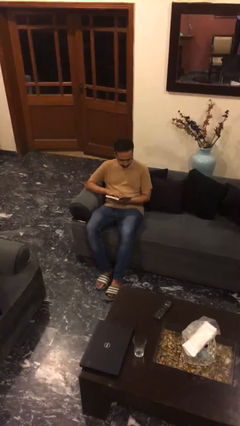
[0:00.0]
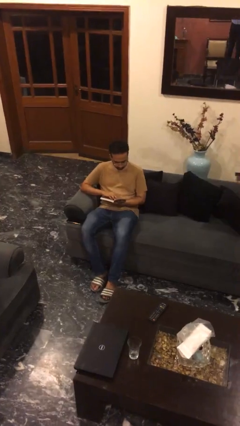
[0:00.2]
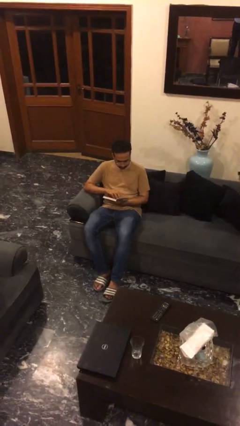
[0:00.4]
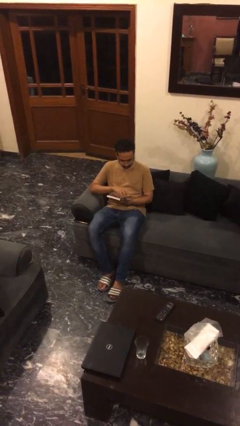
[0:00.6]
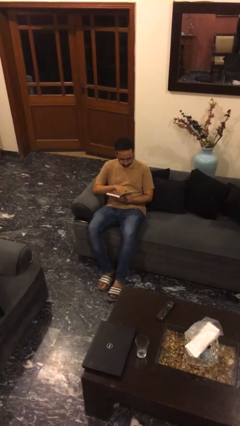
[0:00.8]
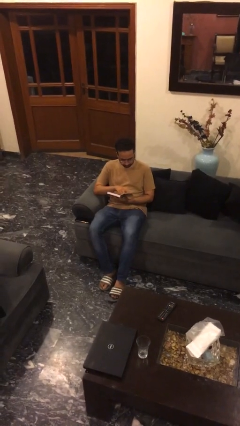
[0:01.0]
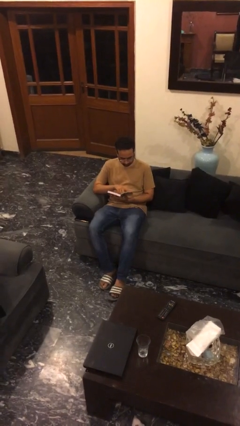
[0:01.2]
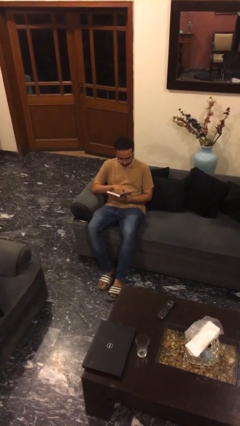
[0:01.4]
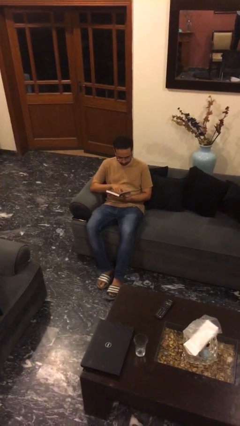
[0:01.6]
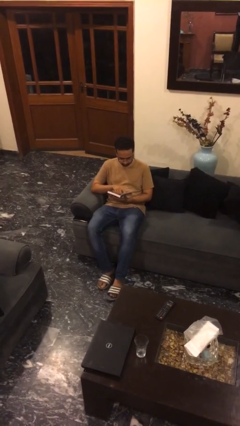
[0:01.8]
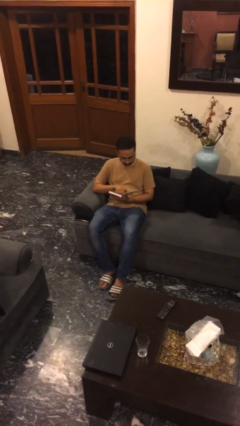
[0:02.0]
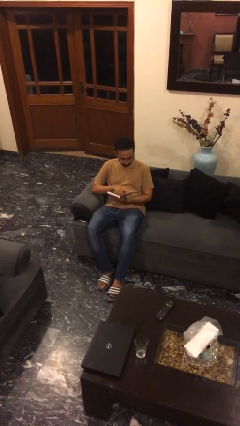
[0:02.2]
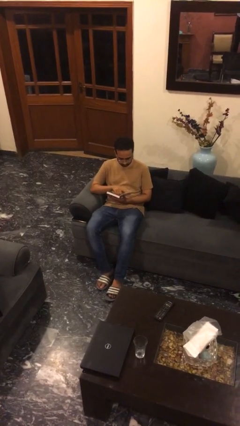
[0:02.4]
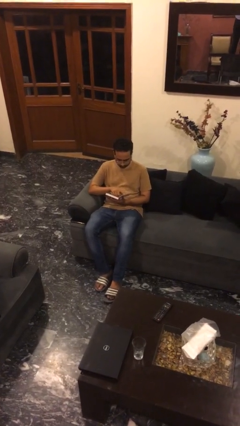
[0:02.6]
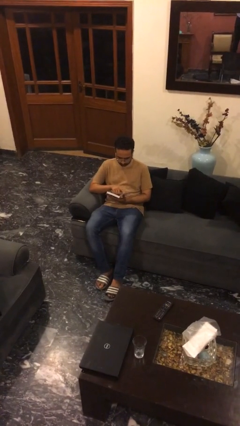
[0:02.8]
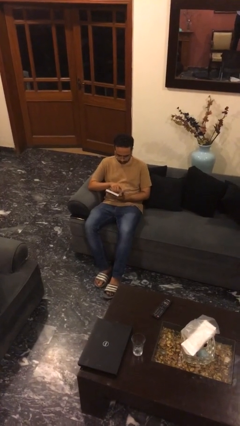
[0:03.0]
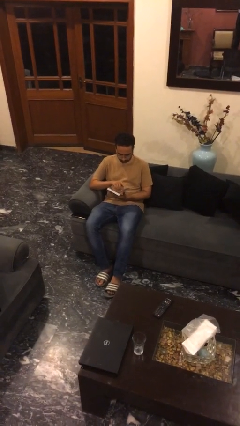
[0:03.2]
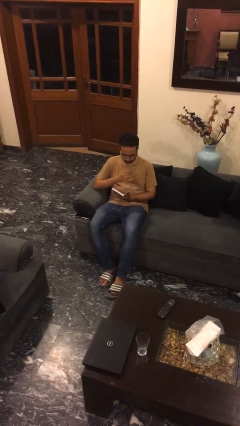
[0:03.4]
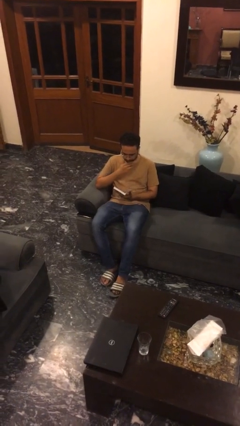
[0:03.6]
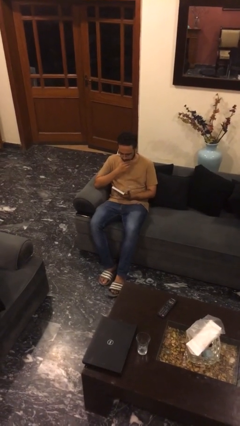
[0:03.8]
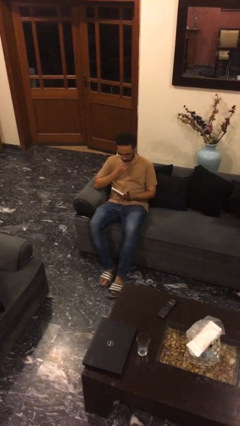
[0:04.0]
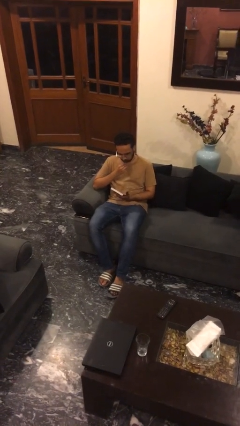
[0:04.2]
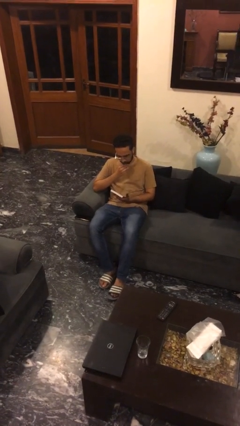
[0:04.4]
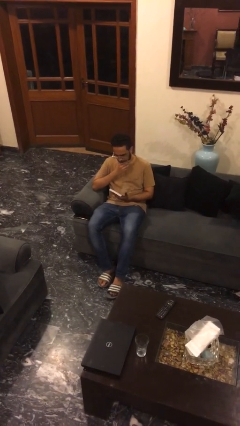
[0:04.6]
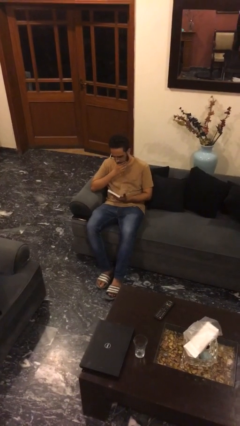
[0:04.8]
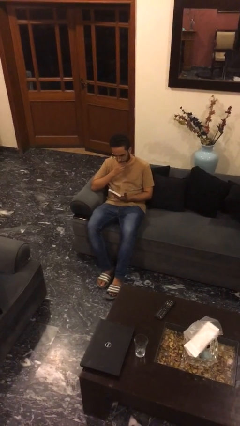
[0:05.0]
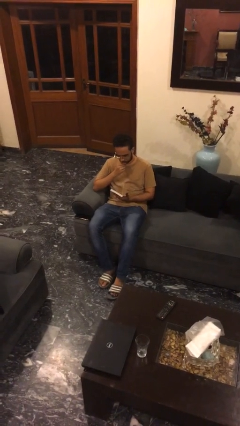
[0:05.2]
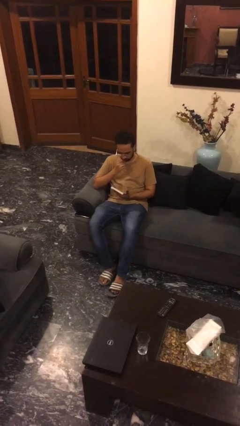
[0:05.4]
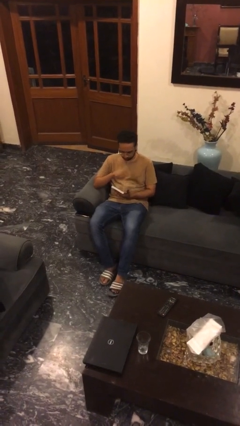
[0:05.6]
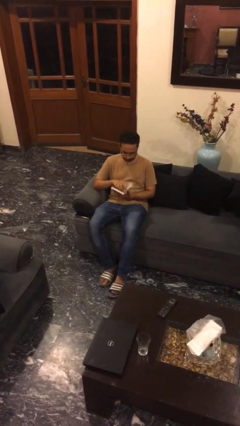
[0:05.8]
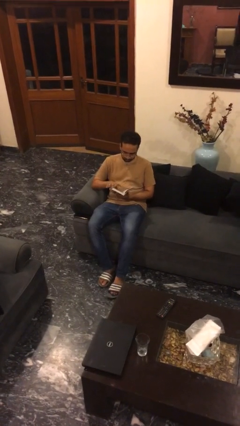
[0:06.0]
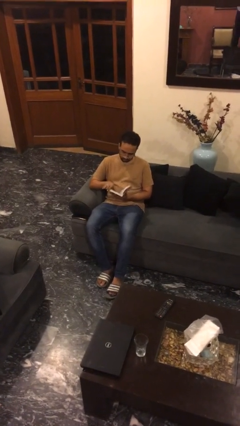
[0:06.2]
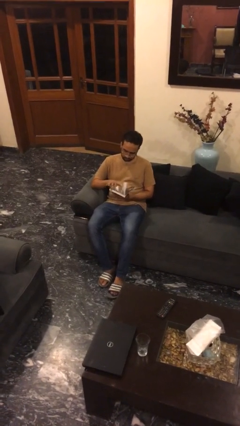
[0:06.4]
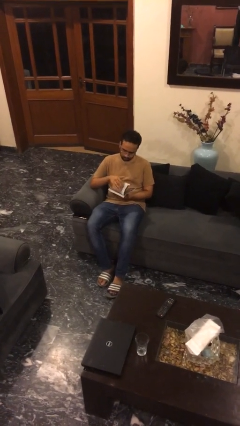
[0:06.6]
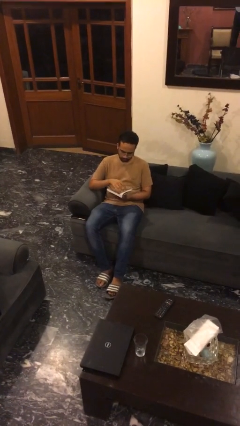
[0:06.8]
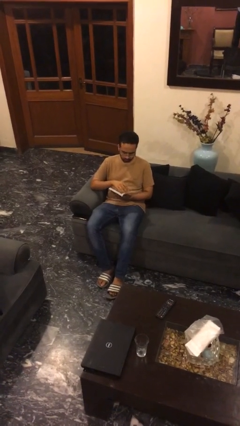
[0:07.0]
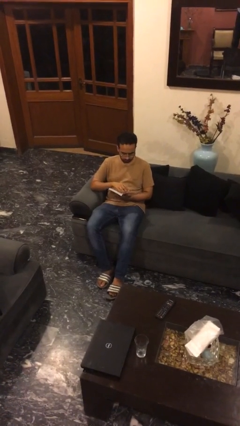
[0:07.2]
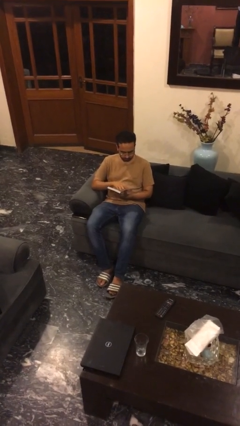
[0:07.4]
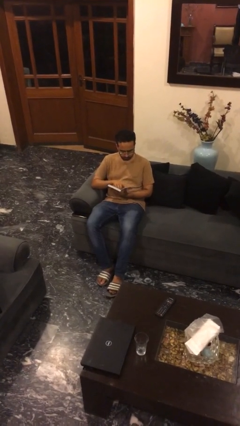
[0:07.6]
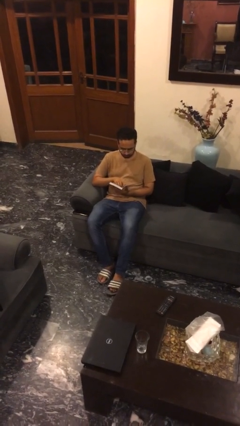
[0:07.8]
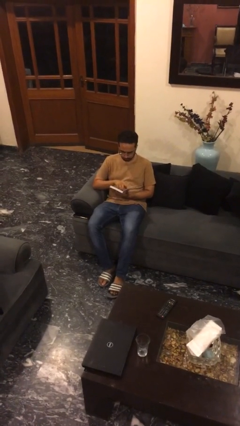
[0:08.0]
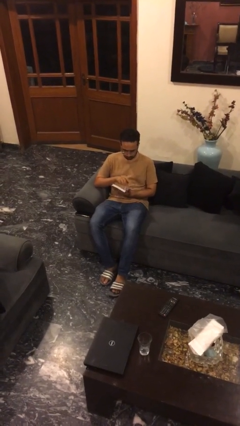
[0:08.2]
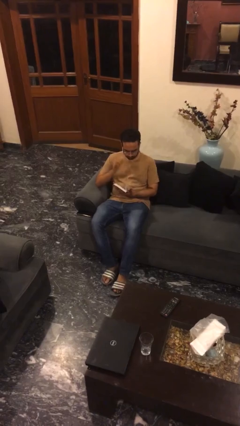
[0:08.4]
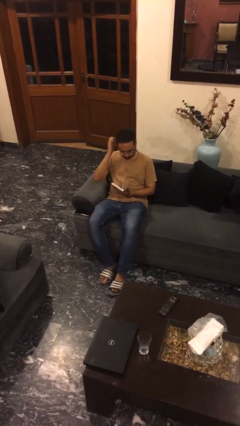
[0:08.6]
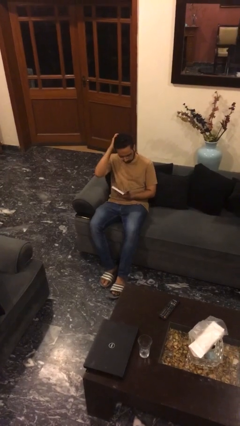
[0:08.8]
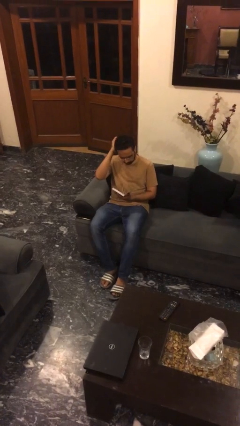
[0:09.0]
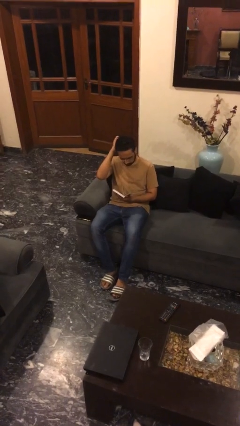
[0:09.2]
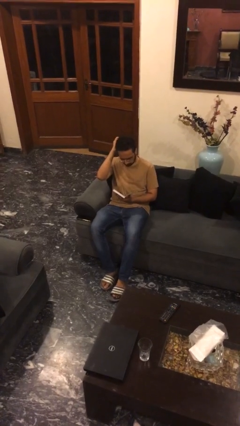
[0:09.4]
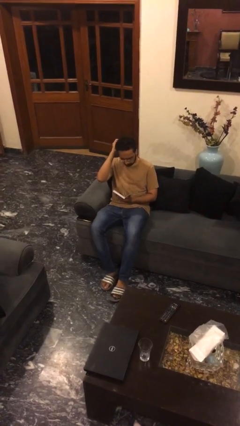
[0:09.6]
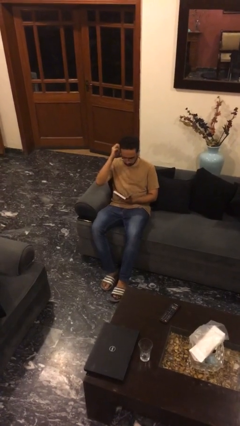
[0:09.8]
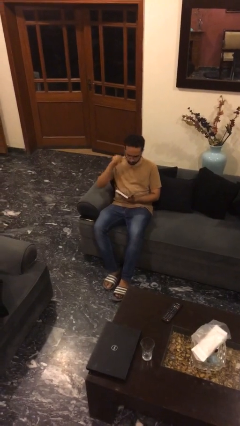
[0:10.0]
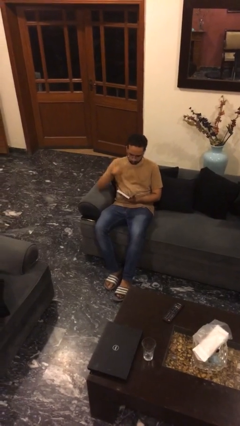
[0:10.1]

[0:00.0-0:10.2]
person reads document

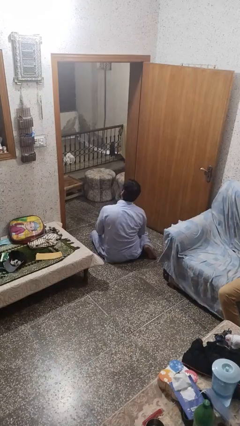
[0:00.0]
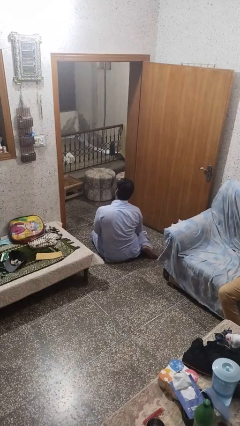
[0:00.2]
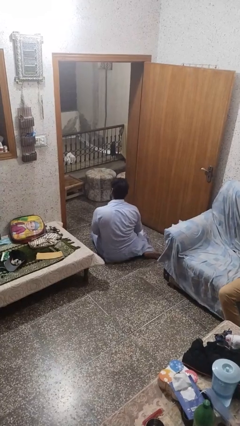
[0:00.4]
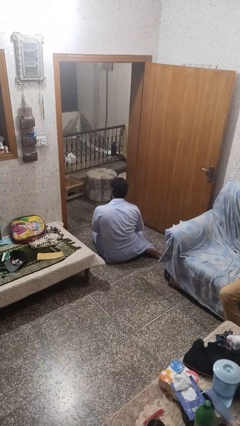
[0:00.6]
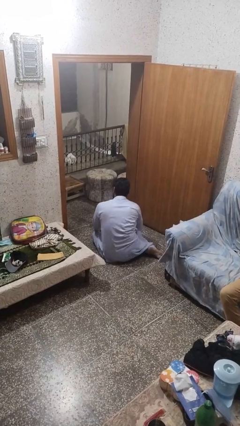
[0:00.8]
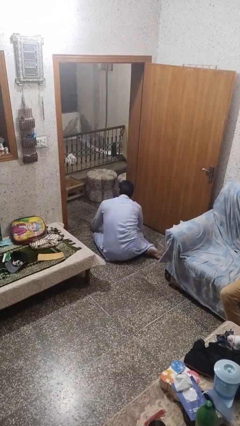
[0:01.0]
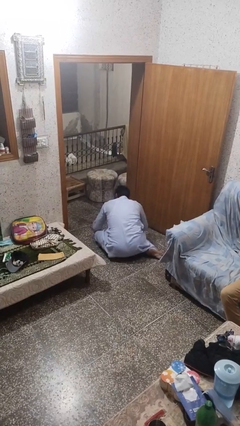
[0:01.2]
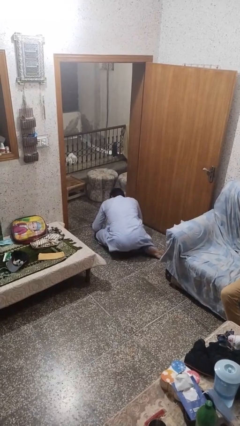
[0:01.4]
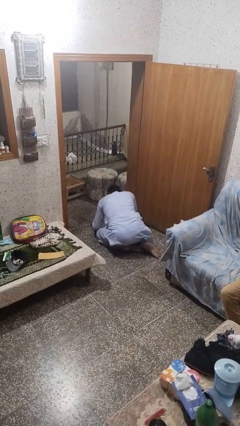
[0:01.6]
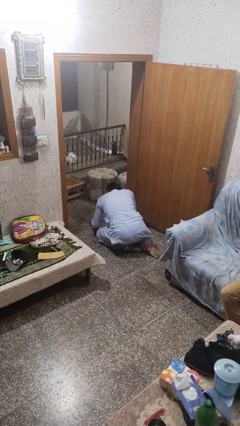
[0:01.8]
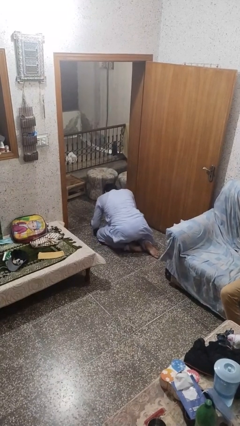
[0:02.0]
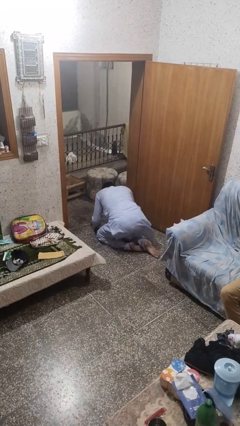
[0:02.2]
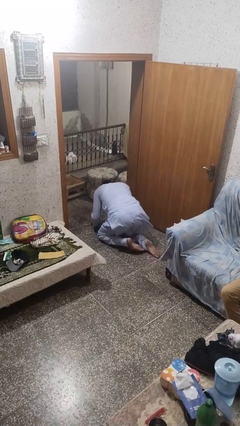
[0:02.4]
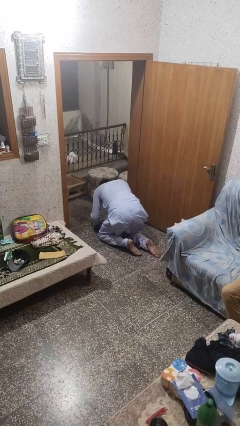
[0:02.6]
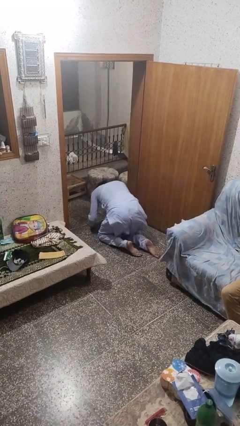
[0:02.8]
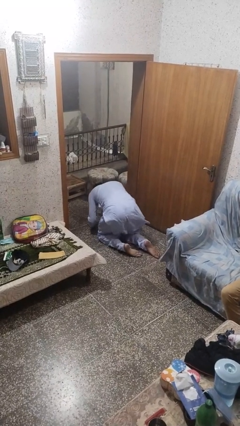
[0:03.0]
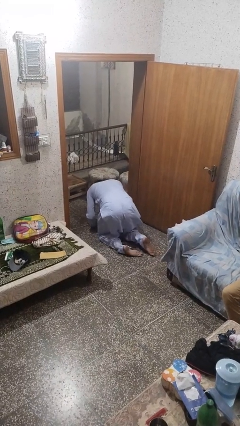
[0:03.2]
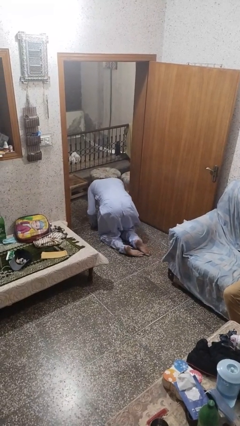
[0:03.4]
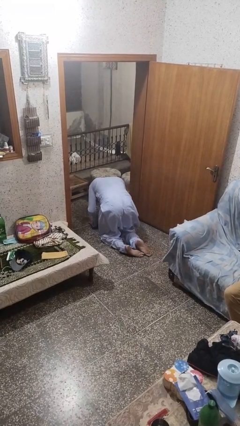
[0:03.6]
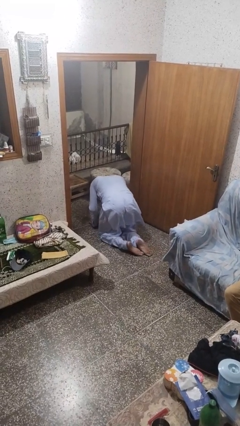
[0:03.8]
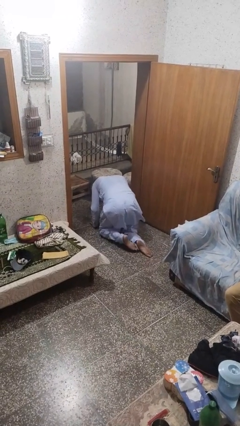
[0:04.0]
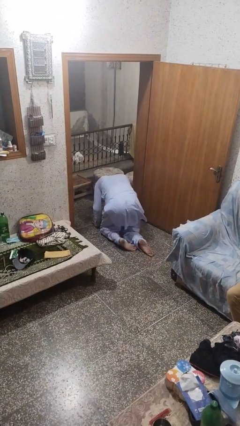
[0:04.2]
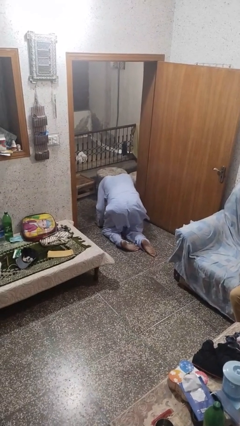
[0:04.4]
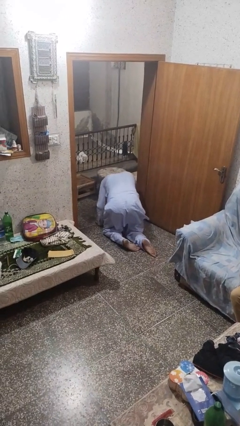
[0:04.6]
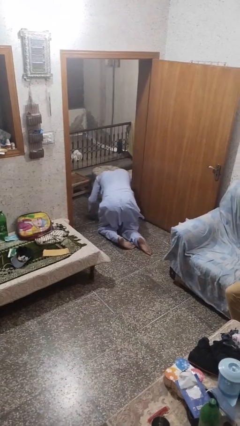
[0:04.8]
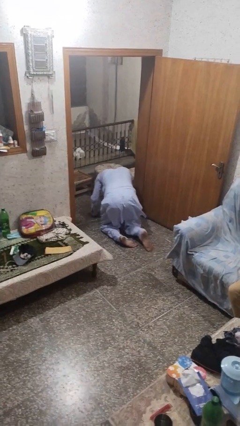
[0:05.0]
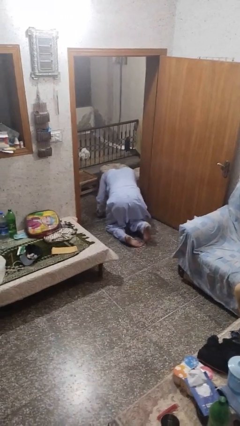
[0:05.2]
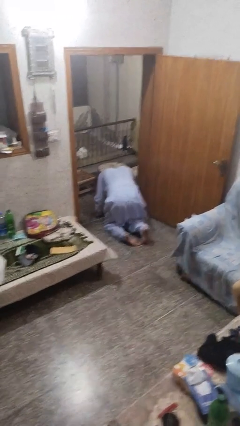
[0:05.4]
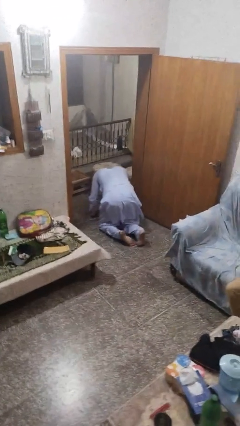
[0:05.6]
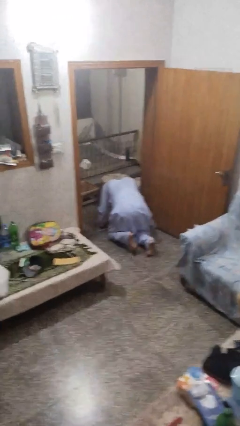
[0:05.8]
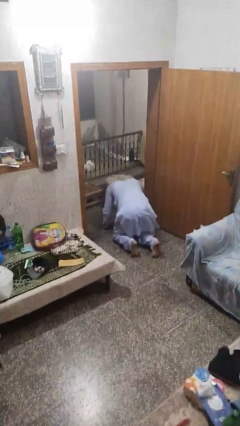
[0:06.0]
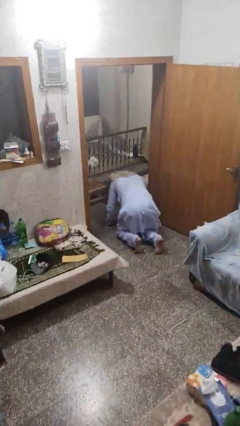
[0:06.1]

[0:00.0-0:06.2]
person crawls

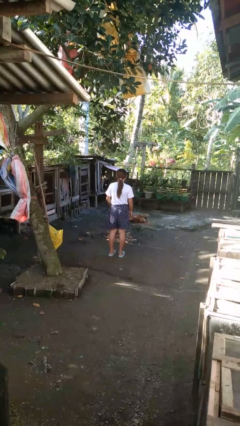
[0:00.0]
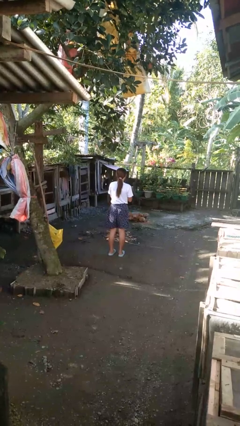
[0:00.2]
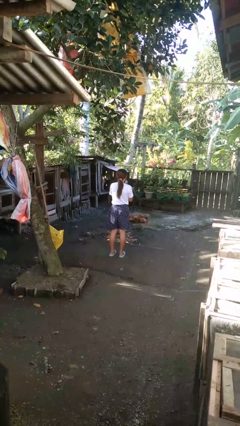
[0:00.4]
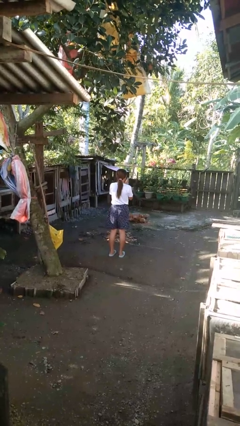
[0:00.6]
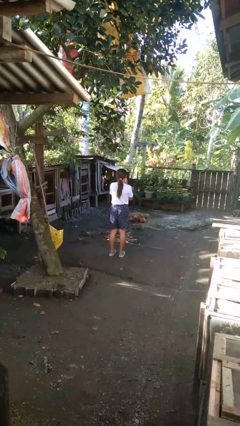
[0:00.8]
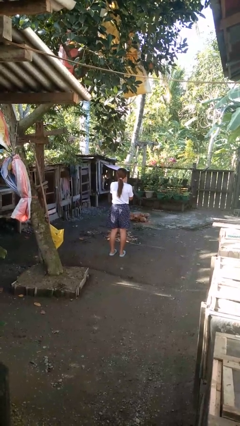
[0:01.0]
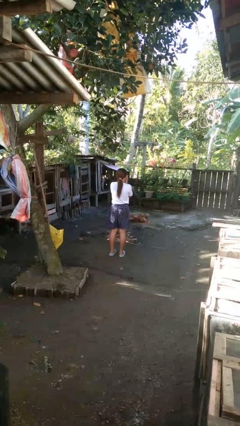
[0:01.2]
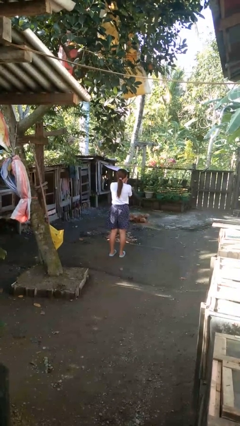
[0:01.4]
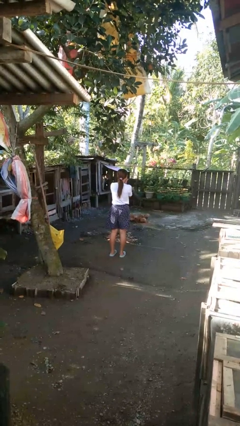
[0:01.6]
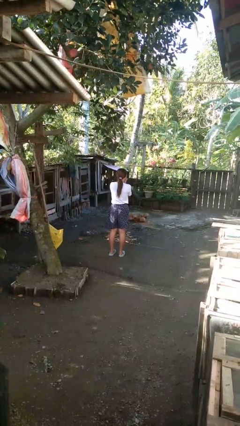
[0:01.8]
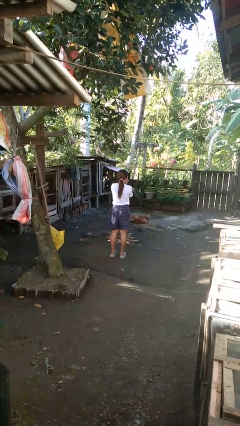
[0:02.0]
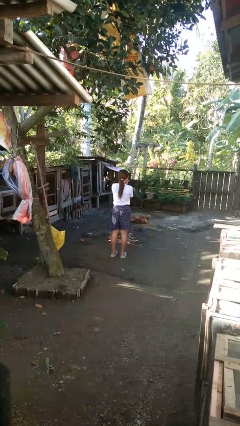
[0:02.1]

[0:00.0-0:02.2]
person blows into hands
